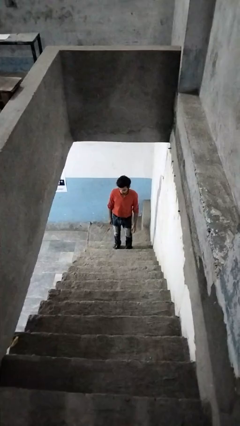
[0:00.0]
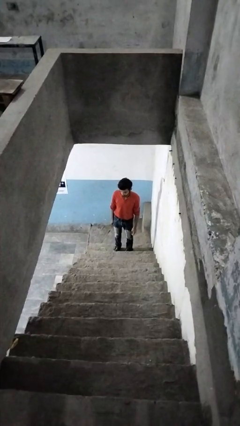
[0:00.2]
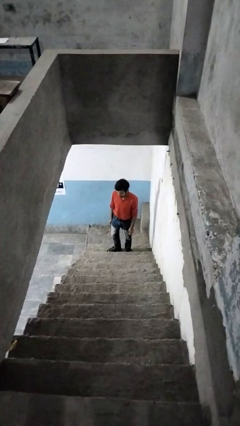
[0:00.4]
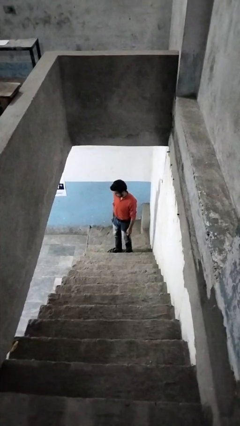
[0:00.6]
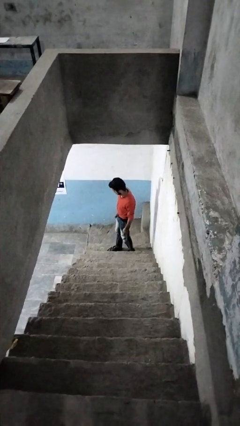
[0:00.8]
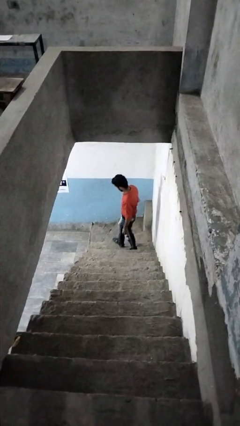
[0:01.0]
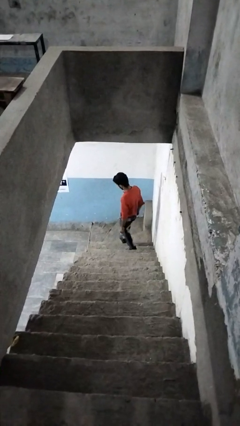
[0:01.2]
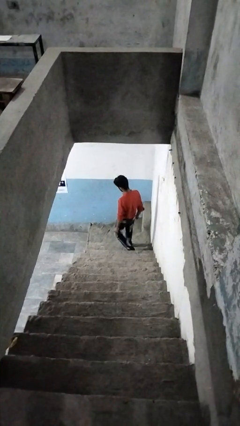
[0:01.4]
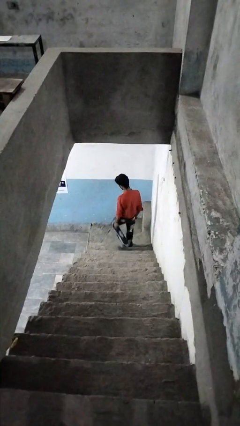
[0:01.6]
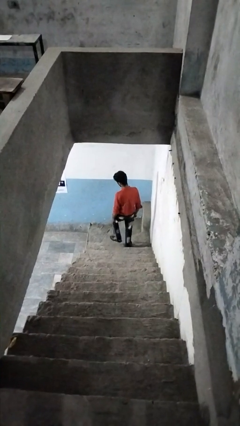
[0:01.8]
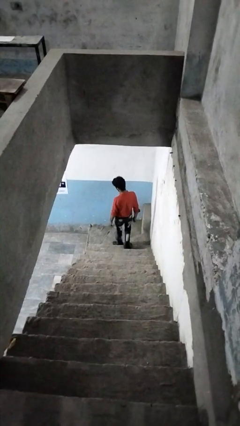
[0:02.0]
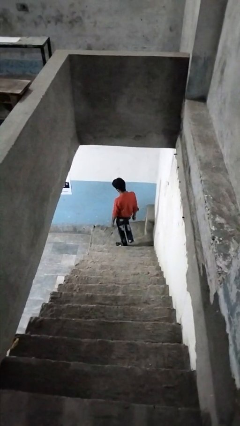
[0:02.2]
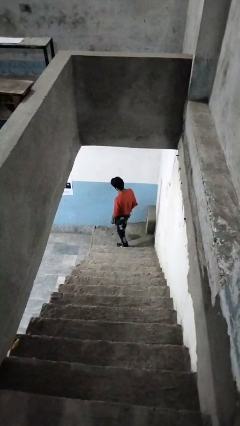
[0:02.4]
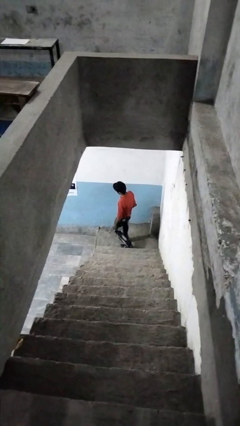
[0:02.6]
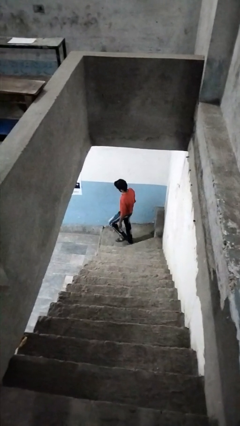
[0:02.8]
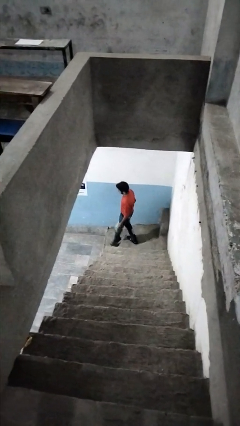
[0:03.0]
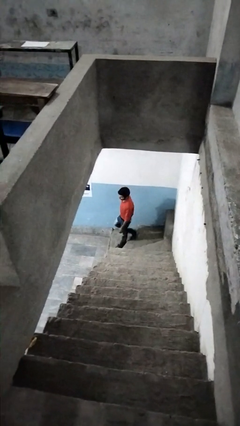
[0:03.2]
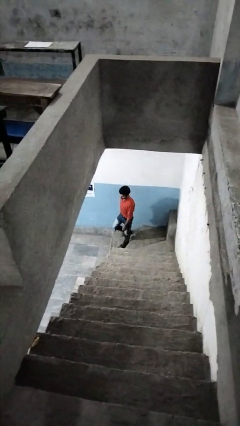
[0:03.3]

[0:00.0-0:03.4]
person climbs down stairs

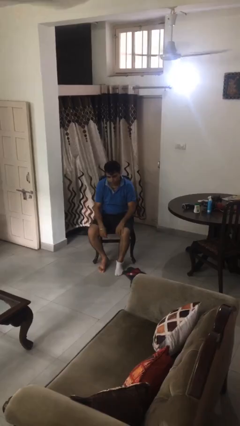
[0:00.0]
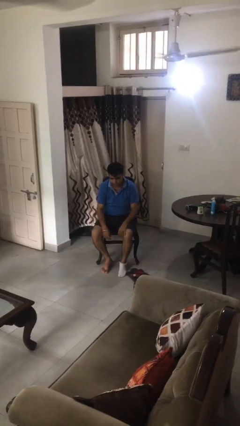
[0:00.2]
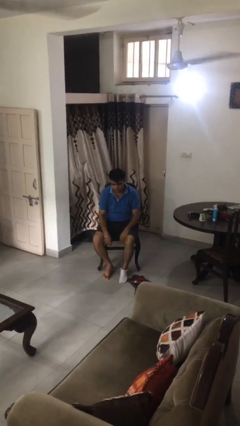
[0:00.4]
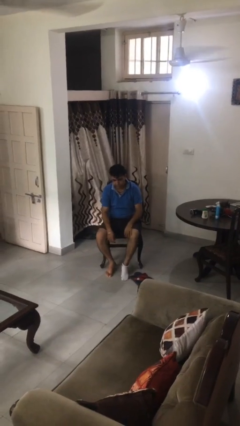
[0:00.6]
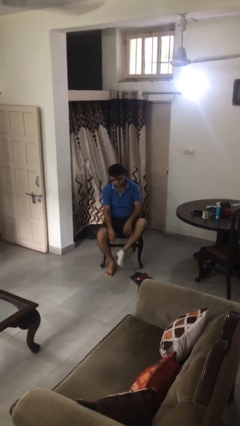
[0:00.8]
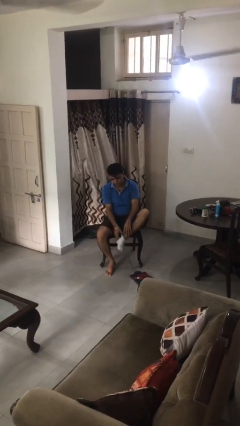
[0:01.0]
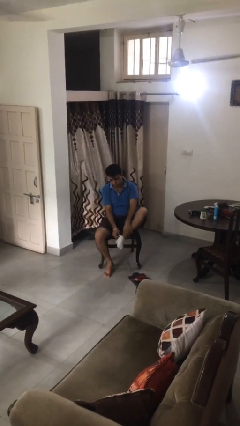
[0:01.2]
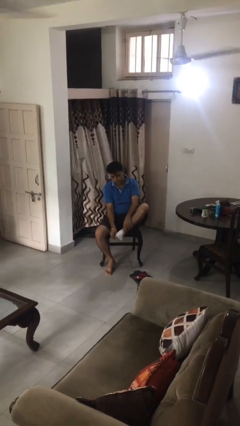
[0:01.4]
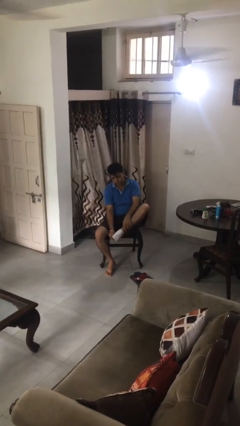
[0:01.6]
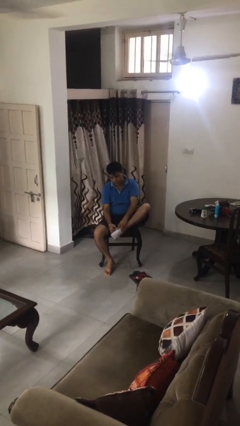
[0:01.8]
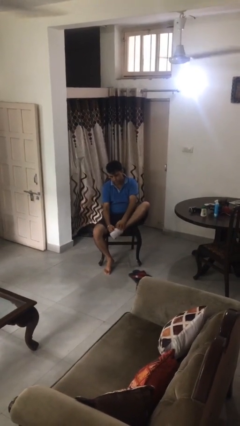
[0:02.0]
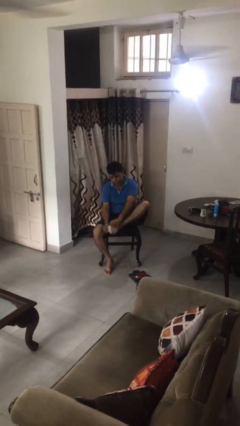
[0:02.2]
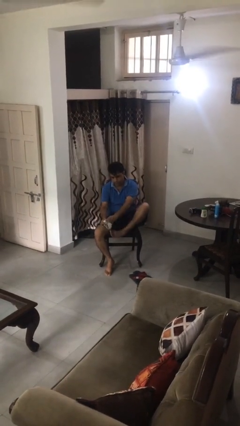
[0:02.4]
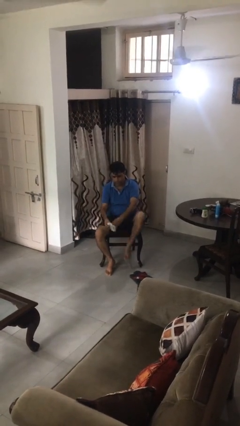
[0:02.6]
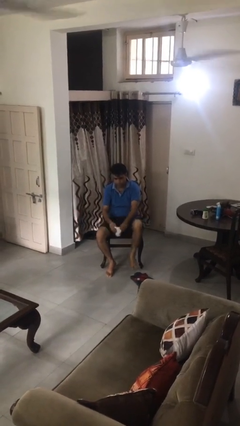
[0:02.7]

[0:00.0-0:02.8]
person takes off socks

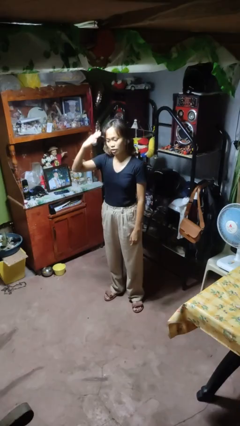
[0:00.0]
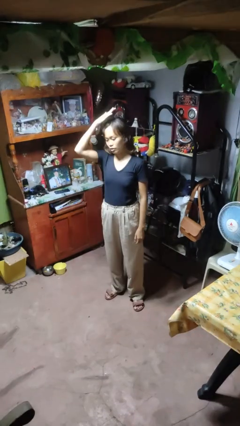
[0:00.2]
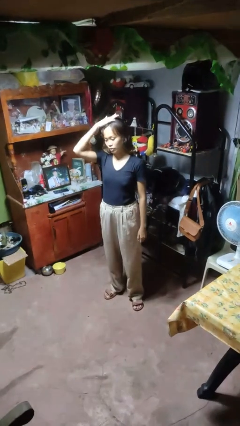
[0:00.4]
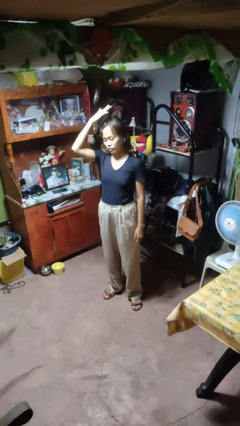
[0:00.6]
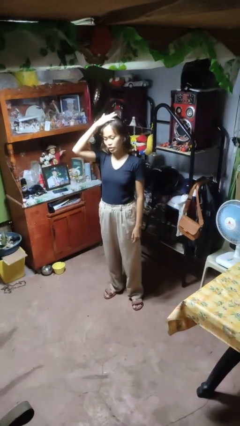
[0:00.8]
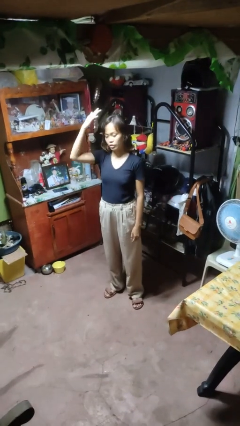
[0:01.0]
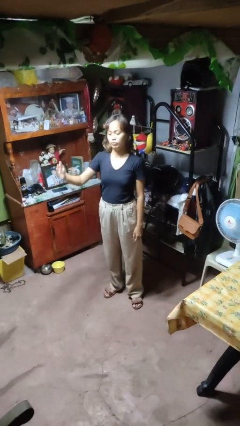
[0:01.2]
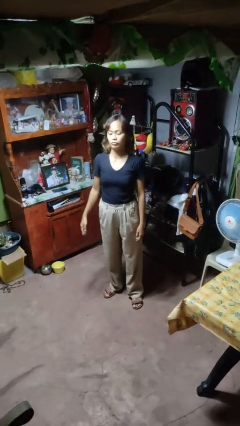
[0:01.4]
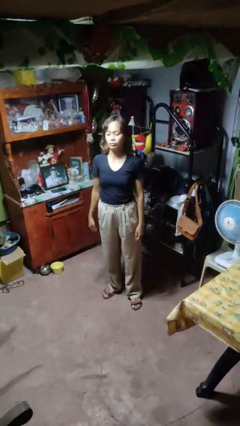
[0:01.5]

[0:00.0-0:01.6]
person pats head

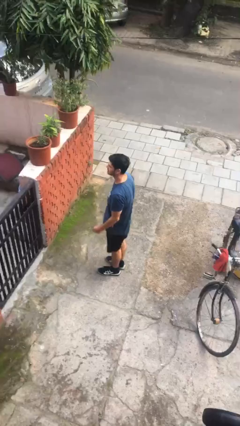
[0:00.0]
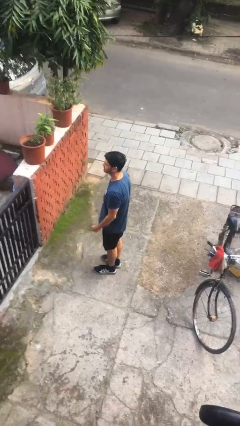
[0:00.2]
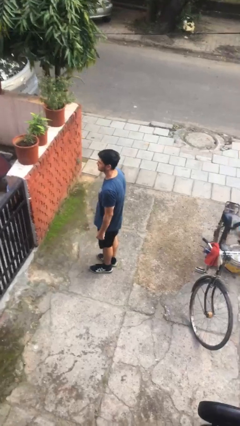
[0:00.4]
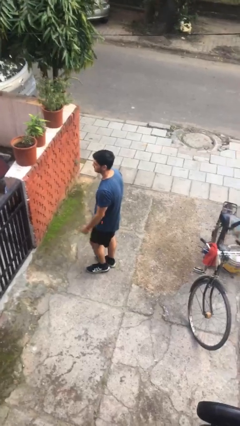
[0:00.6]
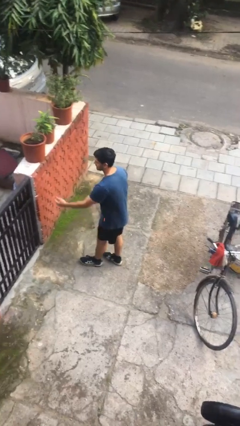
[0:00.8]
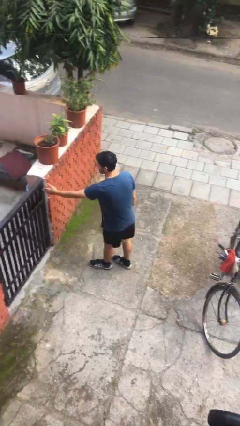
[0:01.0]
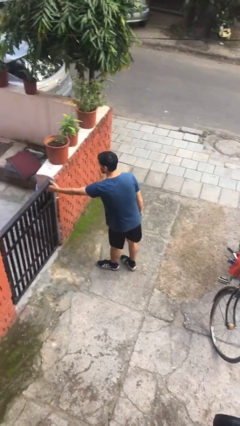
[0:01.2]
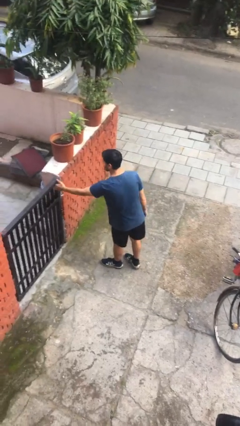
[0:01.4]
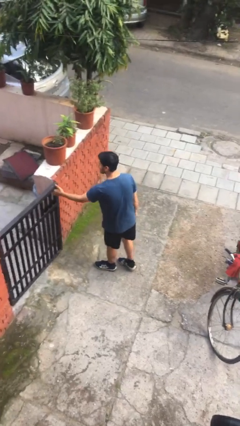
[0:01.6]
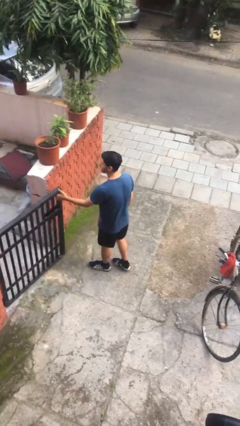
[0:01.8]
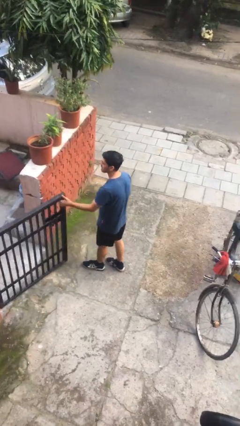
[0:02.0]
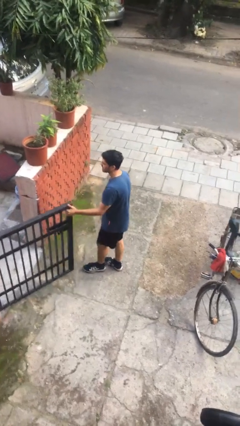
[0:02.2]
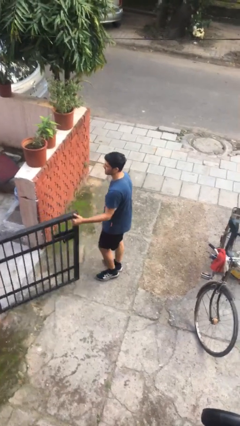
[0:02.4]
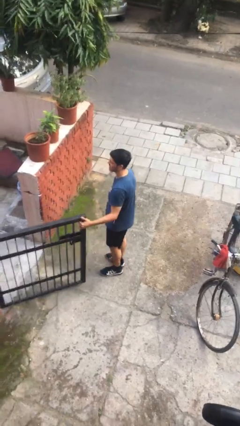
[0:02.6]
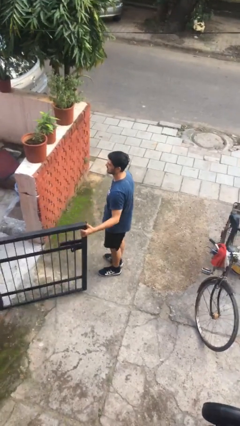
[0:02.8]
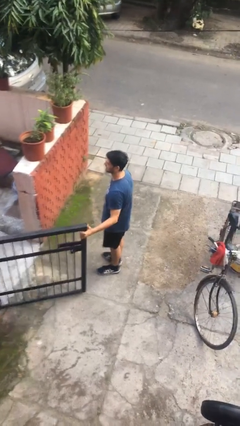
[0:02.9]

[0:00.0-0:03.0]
person opens gate

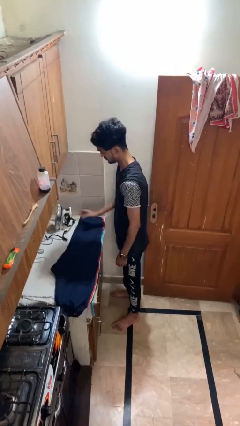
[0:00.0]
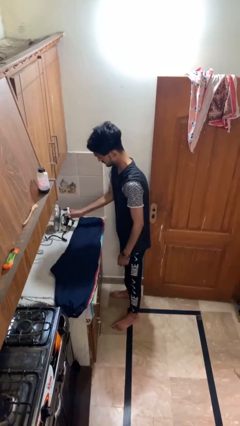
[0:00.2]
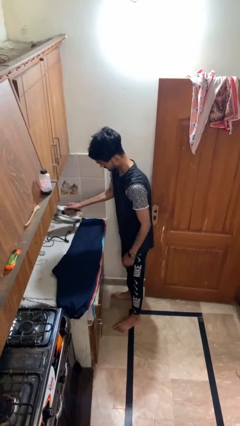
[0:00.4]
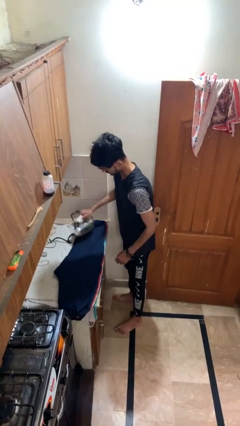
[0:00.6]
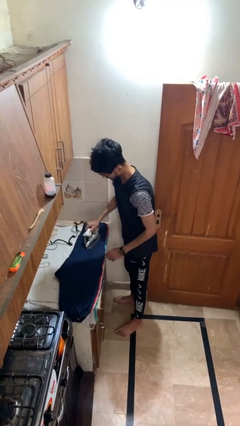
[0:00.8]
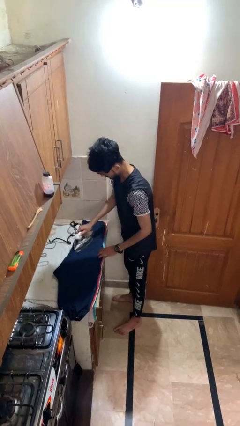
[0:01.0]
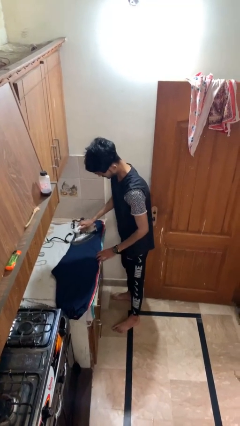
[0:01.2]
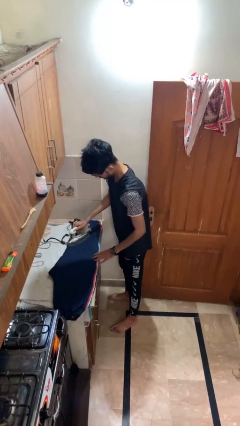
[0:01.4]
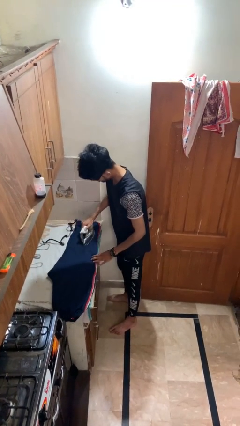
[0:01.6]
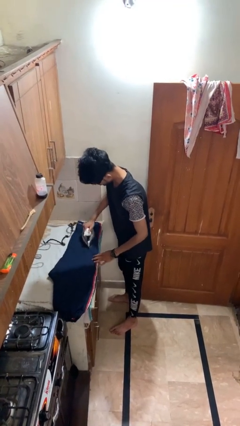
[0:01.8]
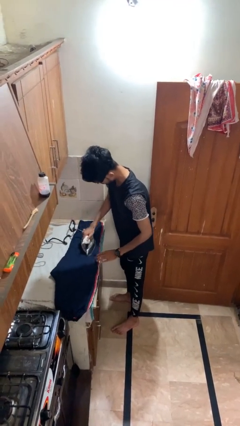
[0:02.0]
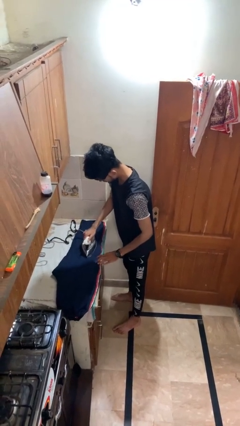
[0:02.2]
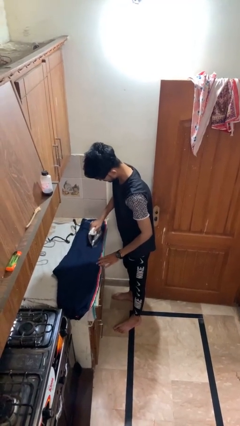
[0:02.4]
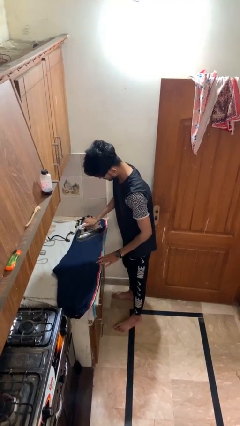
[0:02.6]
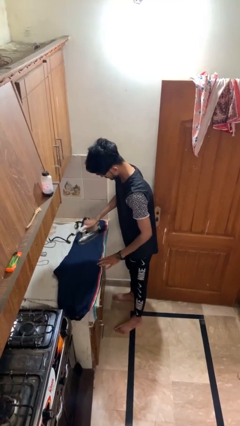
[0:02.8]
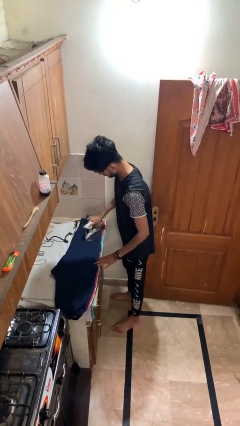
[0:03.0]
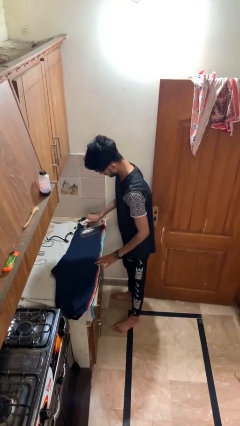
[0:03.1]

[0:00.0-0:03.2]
person irons clothes

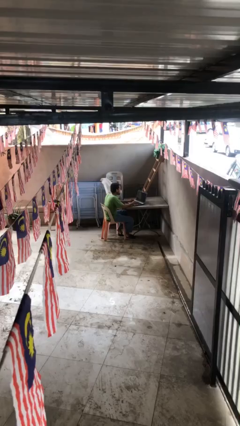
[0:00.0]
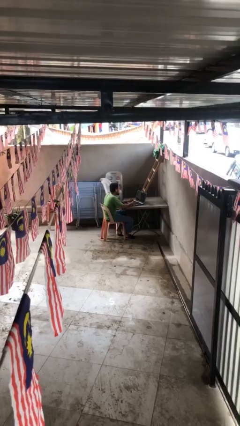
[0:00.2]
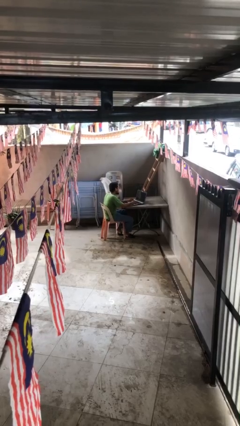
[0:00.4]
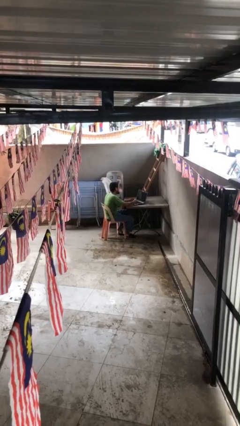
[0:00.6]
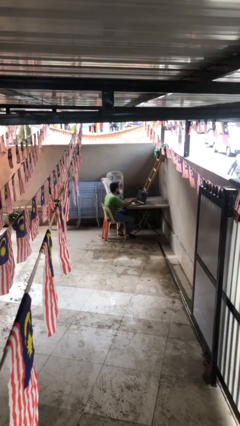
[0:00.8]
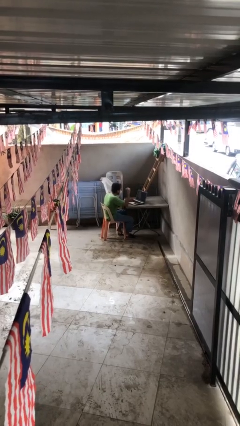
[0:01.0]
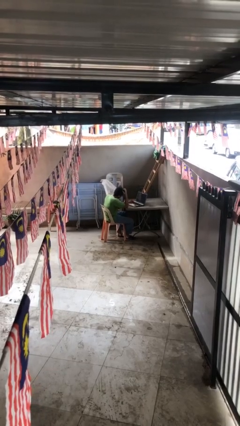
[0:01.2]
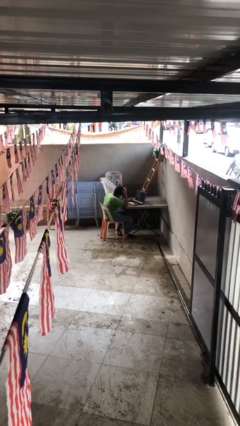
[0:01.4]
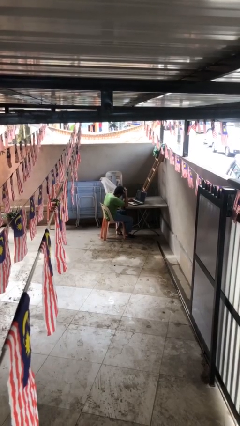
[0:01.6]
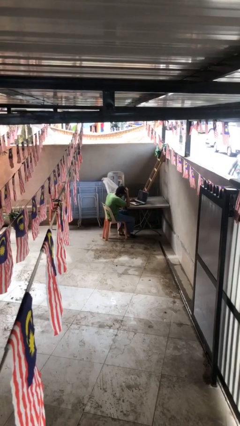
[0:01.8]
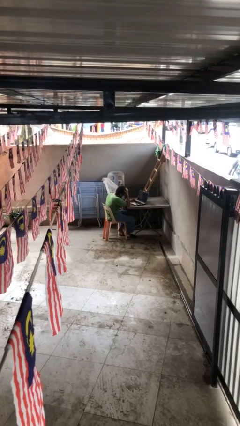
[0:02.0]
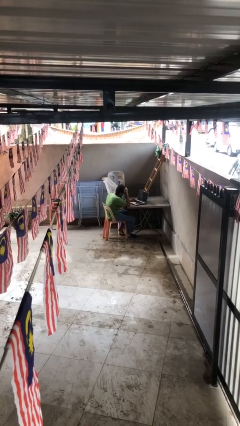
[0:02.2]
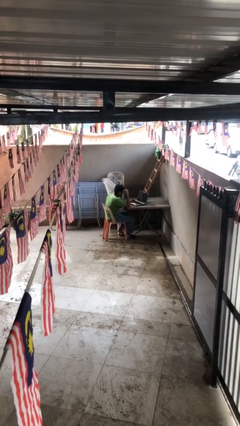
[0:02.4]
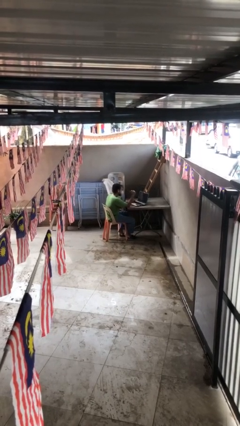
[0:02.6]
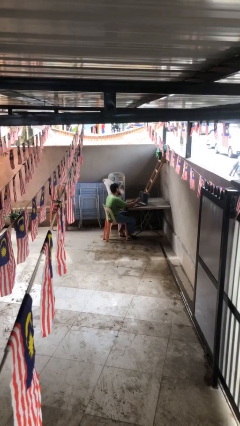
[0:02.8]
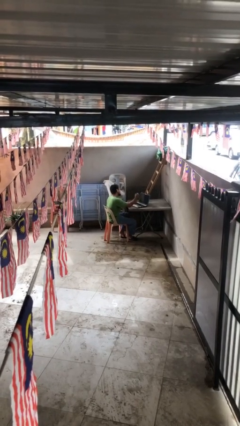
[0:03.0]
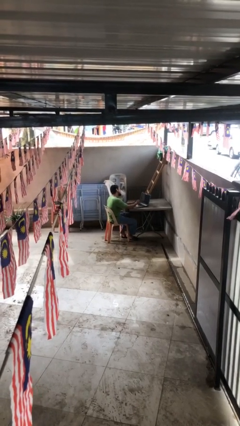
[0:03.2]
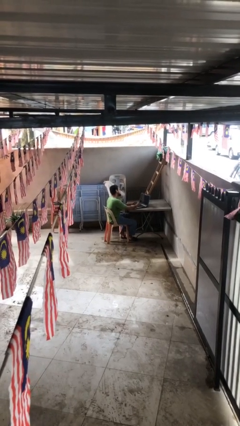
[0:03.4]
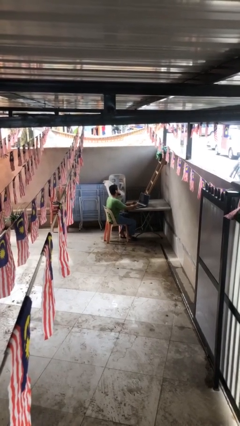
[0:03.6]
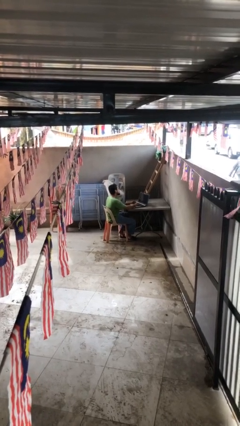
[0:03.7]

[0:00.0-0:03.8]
person interacts with laptop
